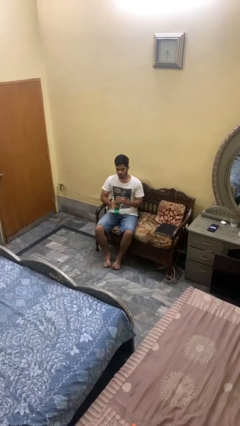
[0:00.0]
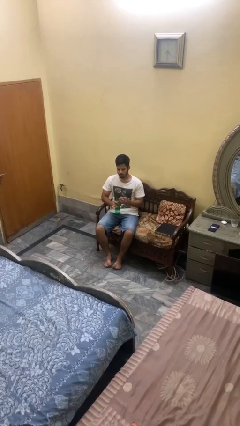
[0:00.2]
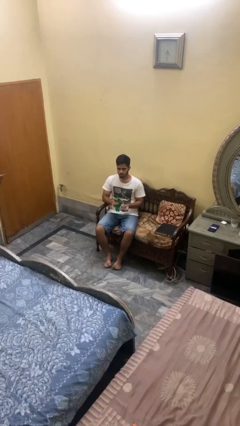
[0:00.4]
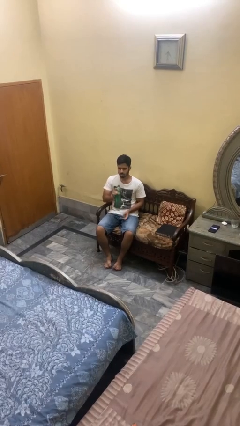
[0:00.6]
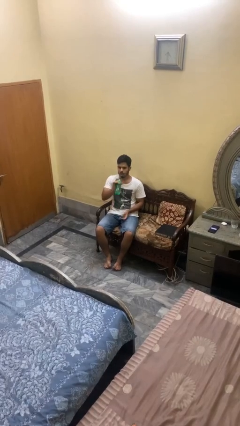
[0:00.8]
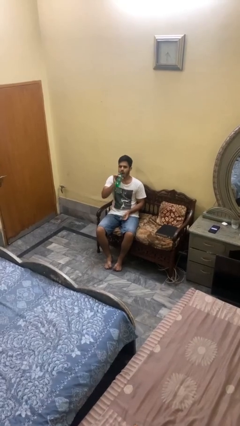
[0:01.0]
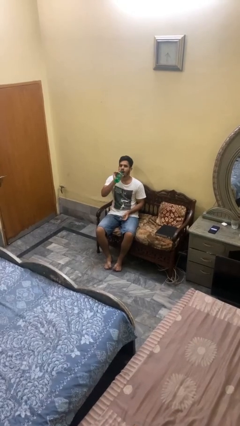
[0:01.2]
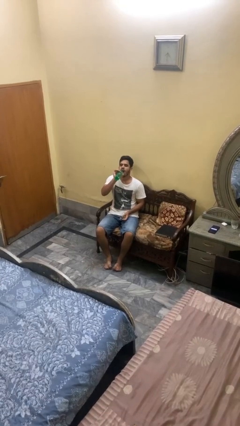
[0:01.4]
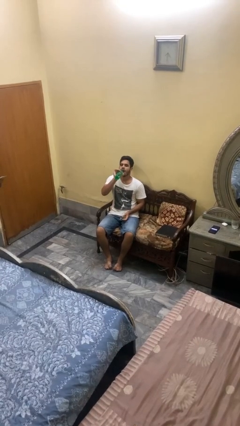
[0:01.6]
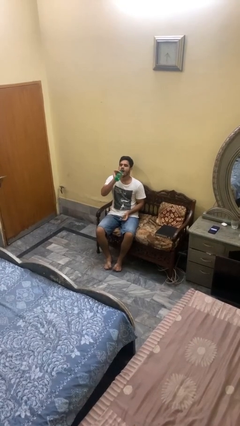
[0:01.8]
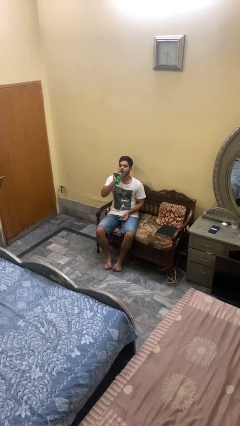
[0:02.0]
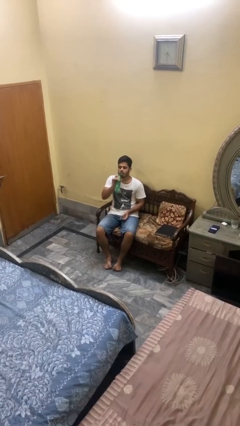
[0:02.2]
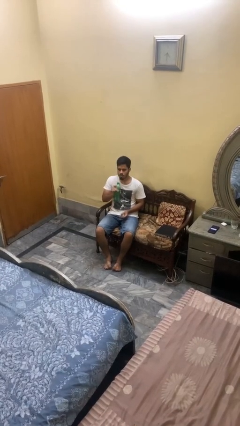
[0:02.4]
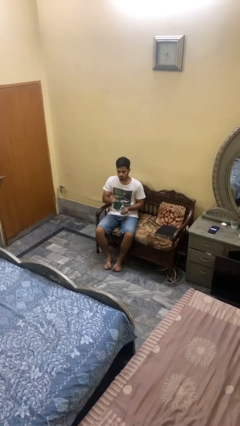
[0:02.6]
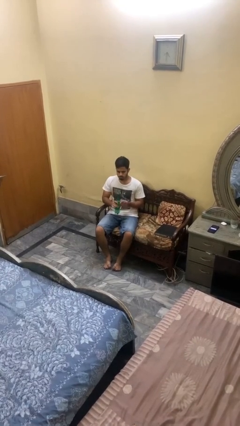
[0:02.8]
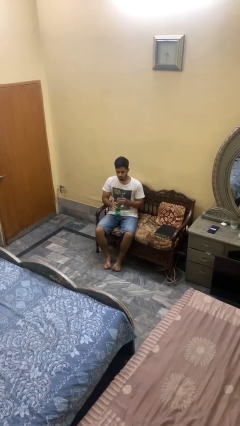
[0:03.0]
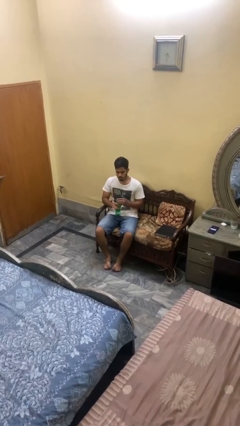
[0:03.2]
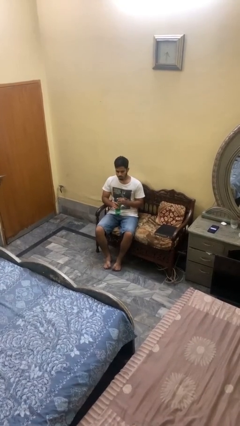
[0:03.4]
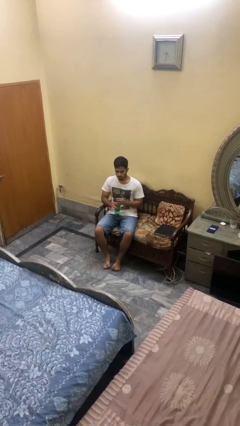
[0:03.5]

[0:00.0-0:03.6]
person drinks from bottle

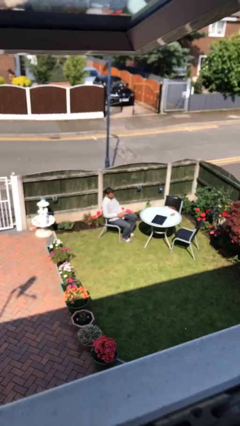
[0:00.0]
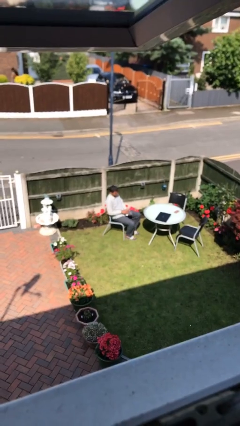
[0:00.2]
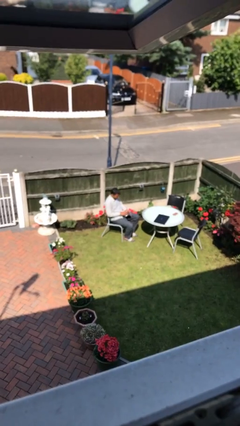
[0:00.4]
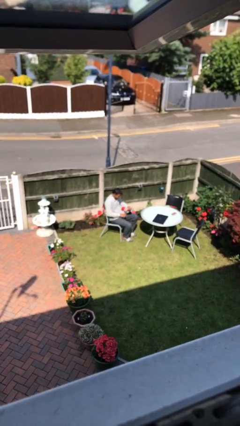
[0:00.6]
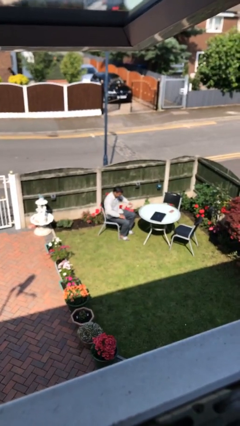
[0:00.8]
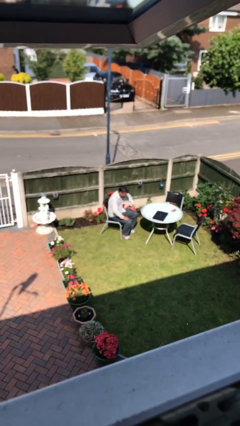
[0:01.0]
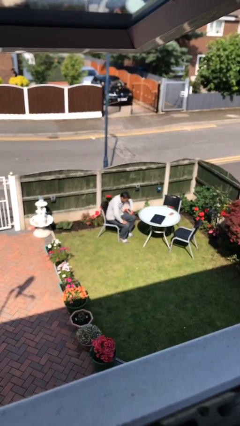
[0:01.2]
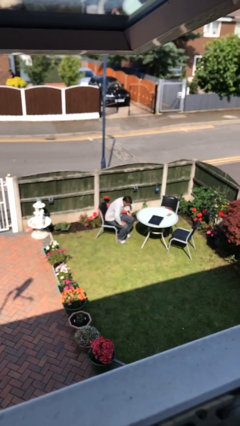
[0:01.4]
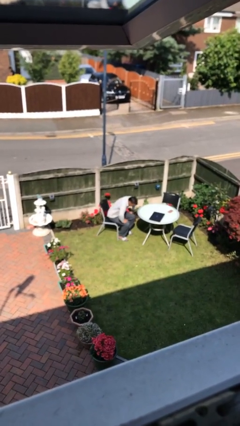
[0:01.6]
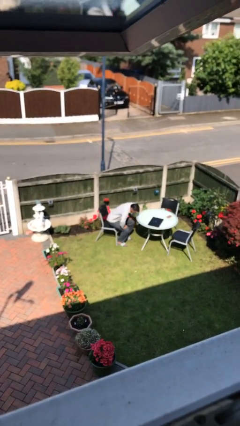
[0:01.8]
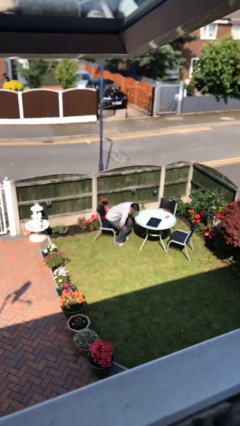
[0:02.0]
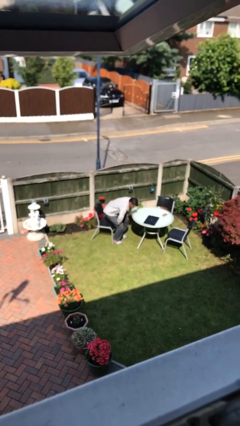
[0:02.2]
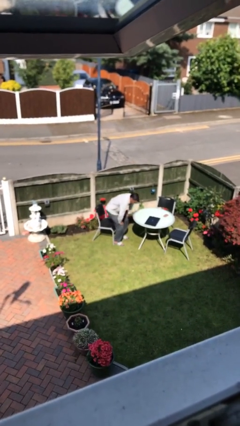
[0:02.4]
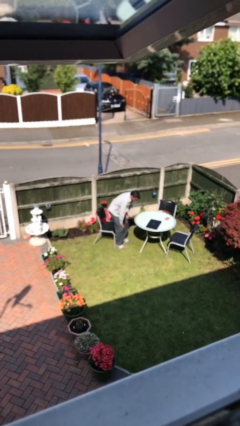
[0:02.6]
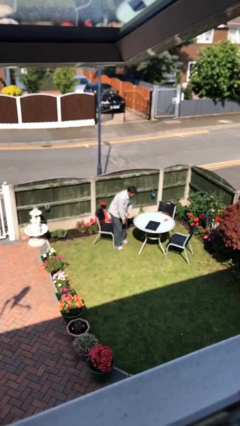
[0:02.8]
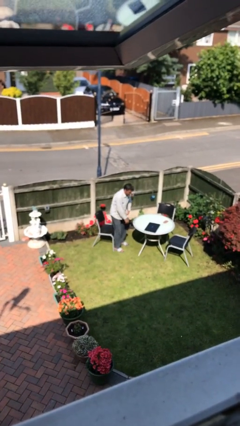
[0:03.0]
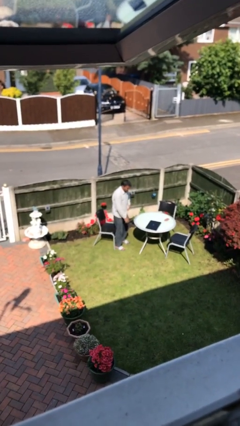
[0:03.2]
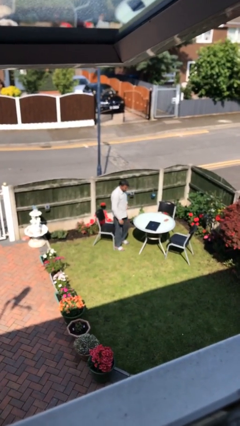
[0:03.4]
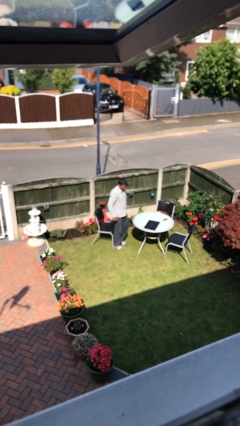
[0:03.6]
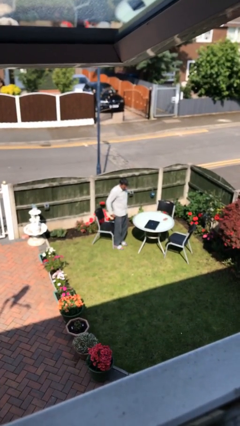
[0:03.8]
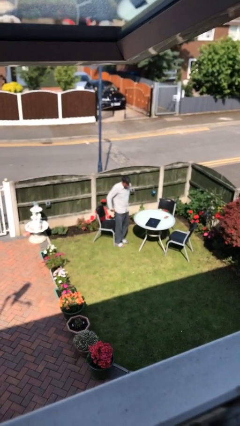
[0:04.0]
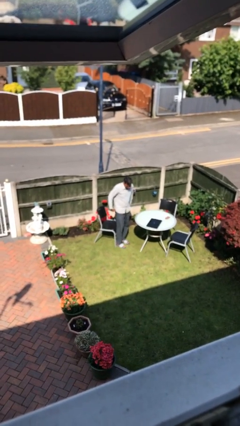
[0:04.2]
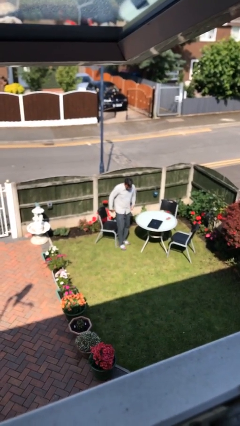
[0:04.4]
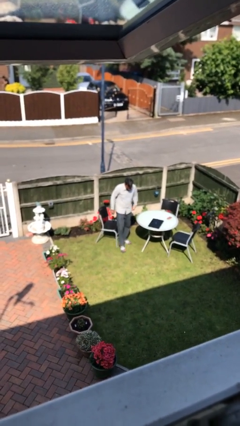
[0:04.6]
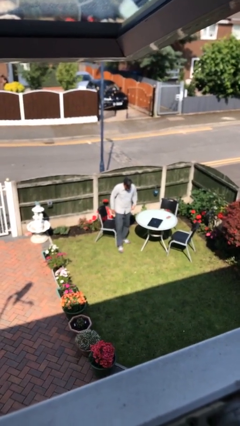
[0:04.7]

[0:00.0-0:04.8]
person stands up

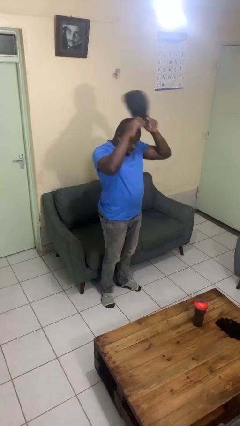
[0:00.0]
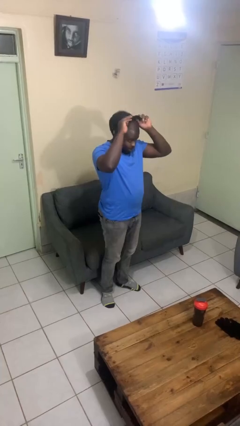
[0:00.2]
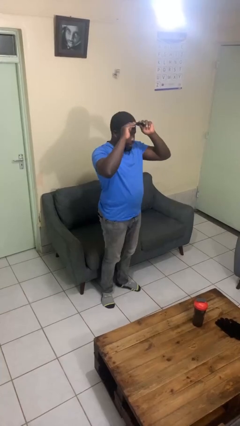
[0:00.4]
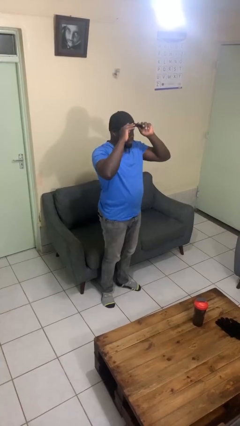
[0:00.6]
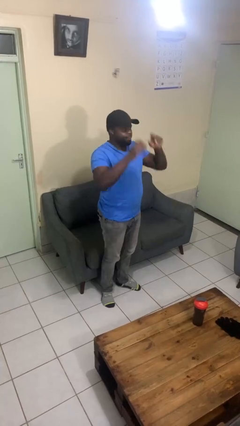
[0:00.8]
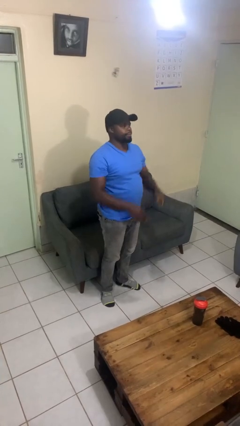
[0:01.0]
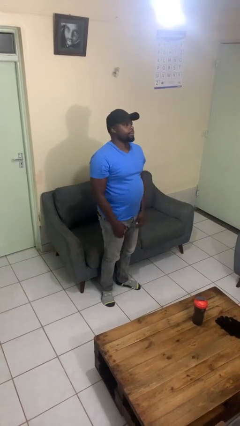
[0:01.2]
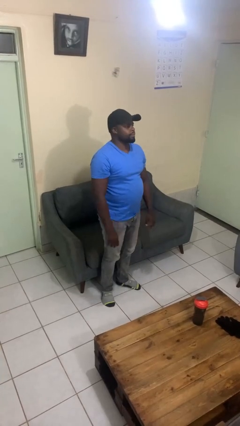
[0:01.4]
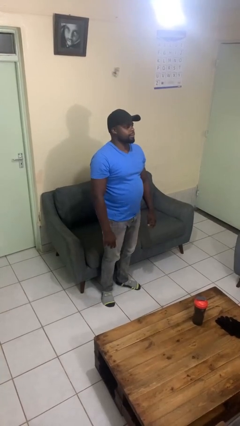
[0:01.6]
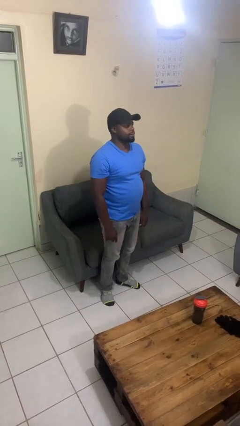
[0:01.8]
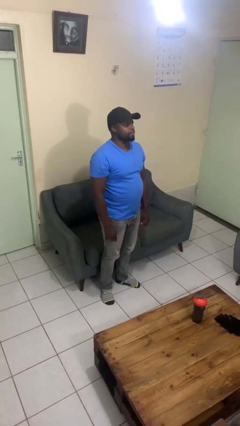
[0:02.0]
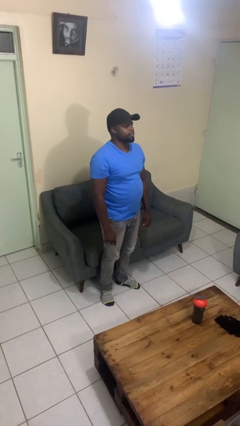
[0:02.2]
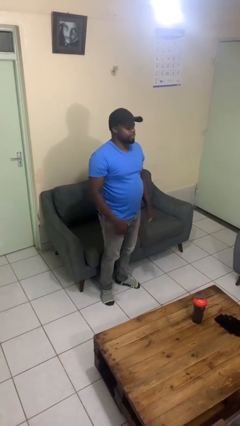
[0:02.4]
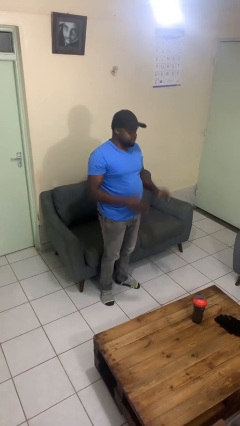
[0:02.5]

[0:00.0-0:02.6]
person puts on hat

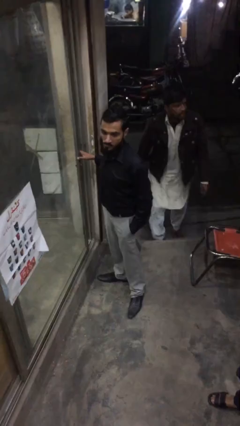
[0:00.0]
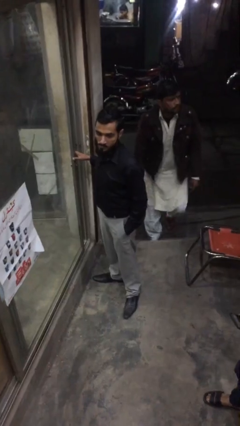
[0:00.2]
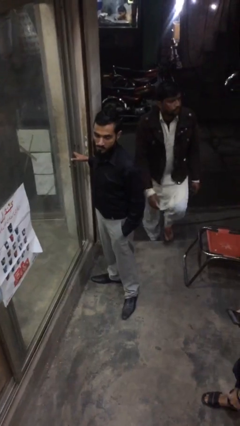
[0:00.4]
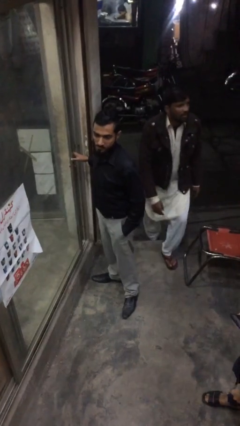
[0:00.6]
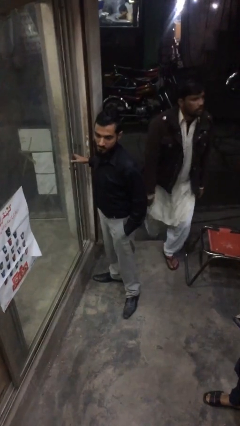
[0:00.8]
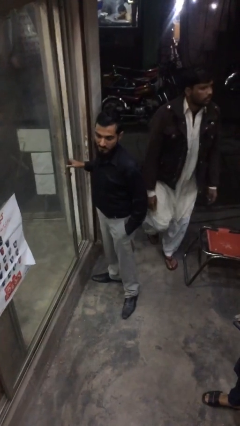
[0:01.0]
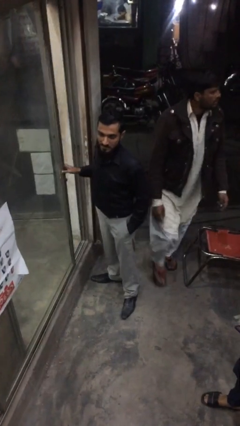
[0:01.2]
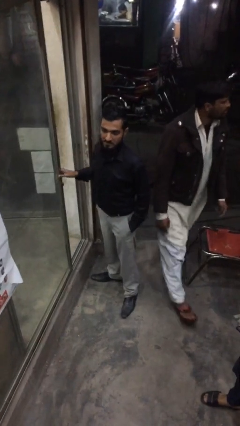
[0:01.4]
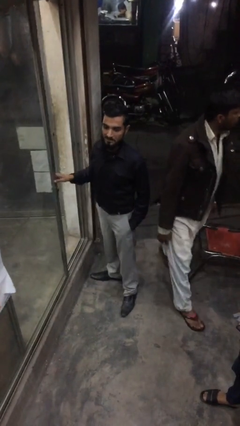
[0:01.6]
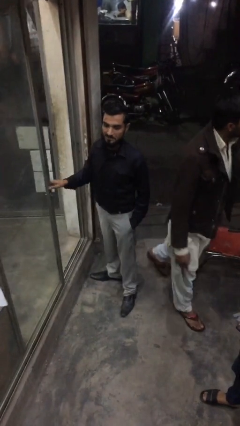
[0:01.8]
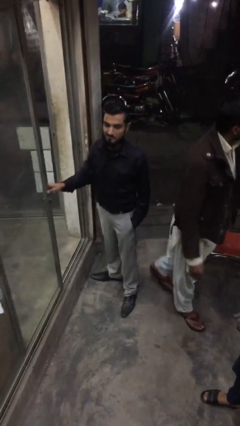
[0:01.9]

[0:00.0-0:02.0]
person opens facility door

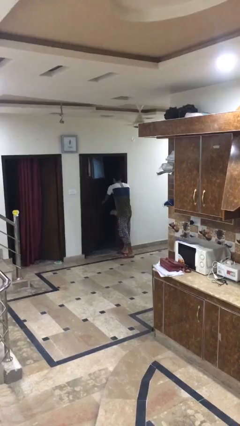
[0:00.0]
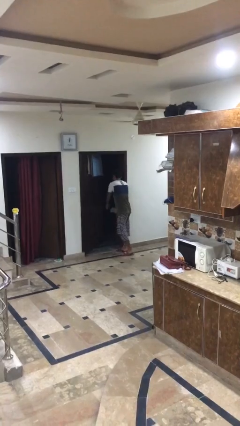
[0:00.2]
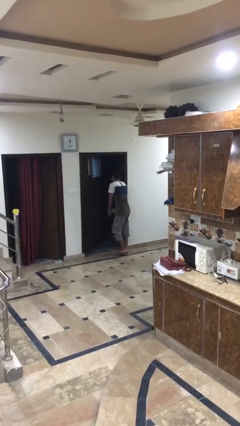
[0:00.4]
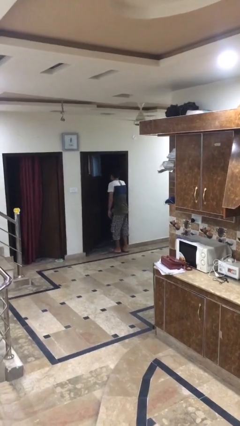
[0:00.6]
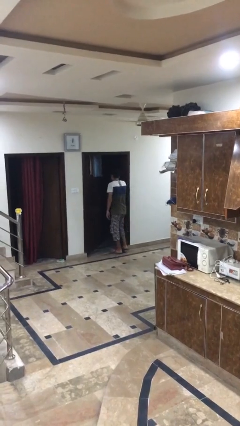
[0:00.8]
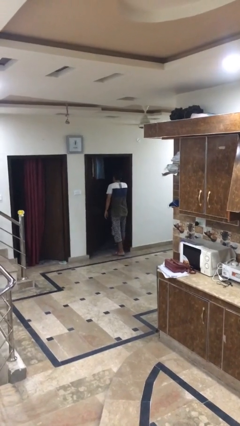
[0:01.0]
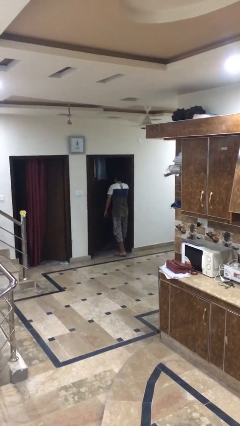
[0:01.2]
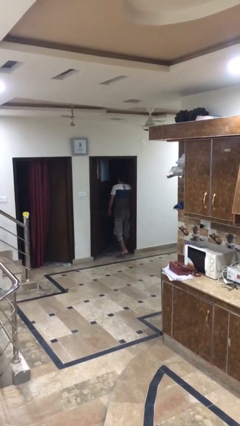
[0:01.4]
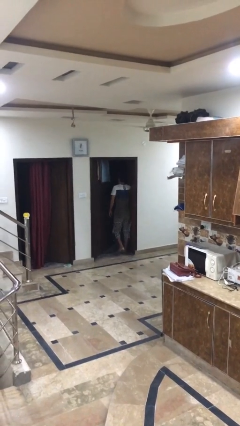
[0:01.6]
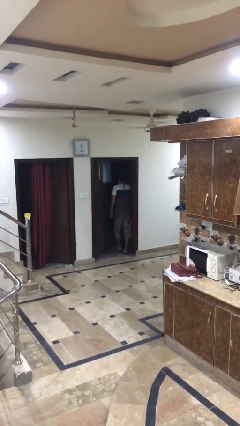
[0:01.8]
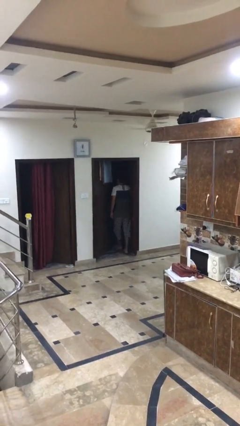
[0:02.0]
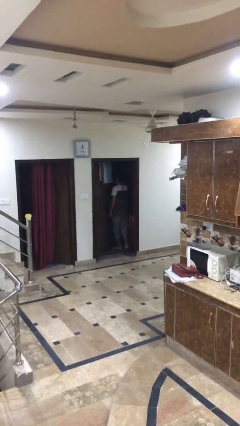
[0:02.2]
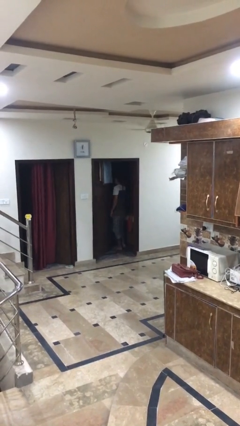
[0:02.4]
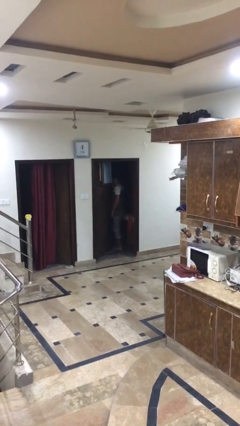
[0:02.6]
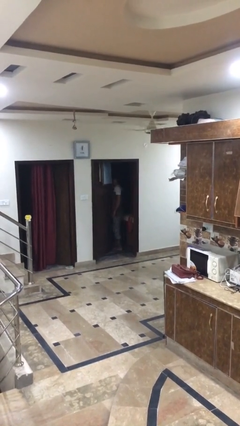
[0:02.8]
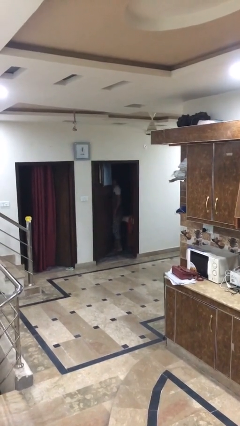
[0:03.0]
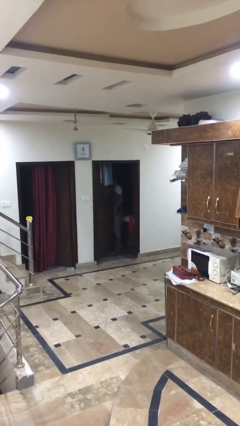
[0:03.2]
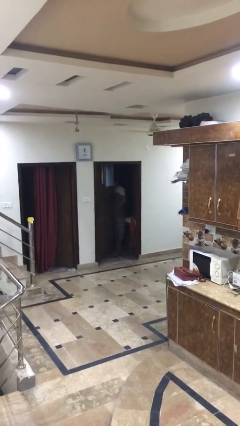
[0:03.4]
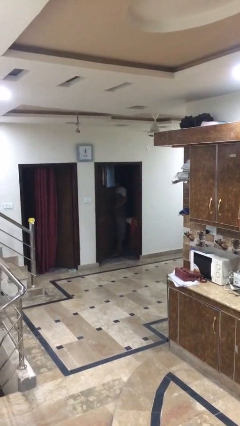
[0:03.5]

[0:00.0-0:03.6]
person exits scene through structure

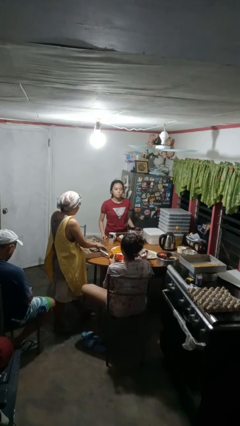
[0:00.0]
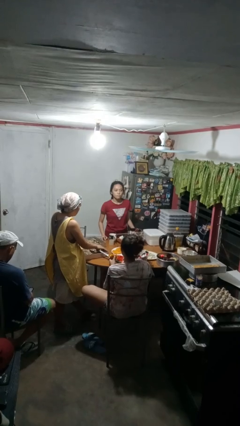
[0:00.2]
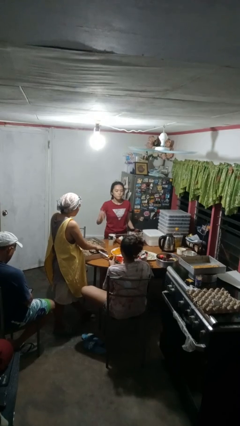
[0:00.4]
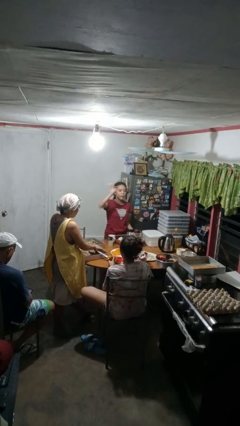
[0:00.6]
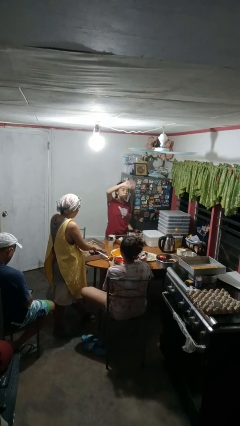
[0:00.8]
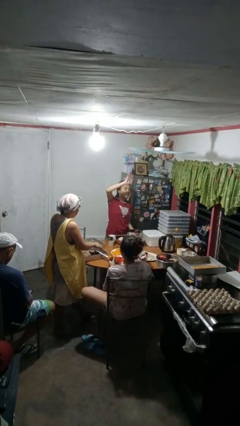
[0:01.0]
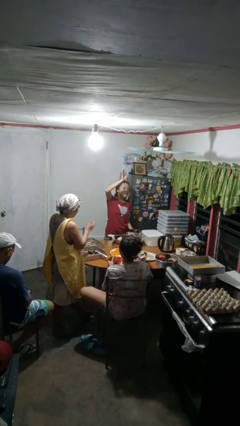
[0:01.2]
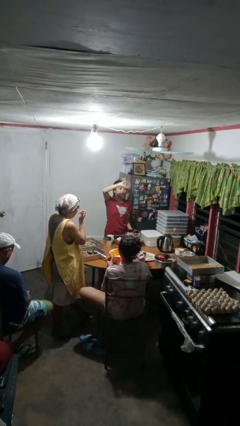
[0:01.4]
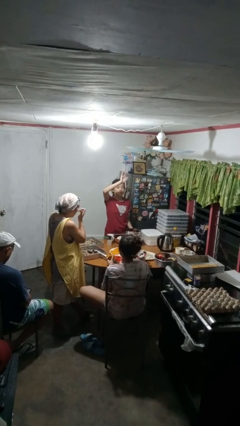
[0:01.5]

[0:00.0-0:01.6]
person waves at person
